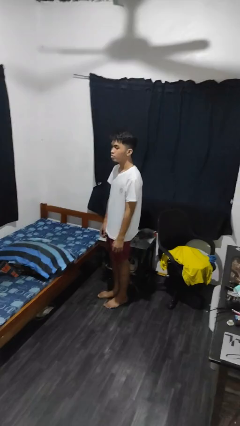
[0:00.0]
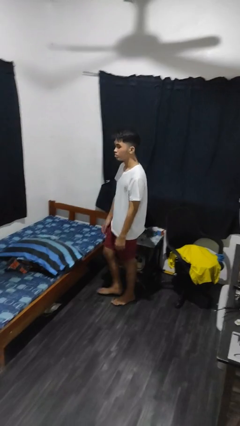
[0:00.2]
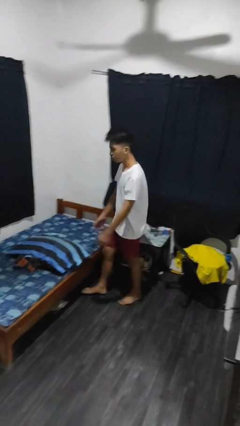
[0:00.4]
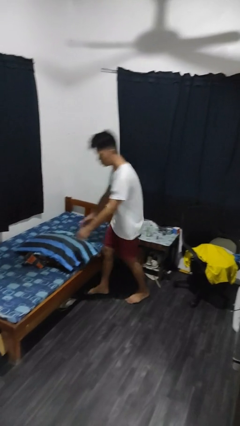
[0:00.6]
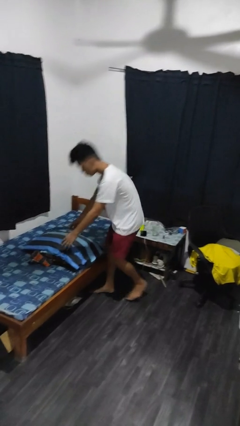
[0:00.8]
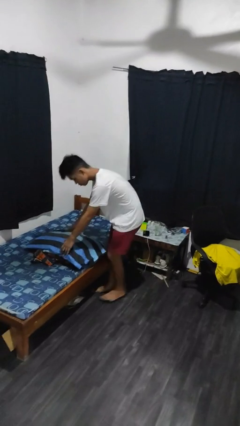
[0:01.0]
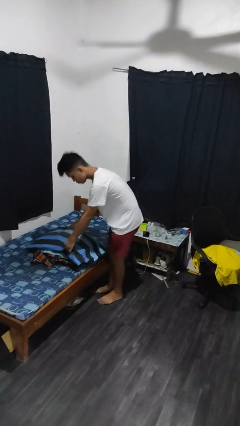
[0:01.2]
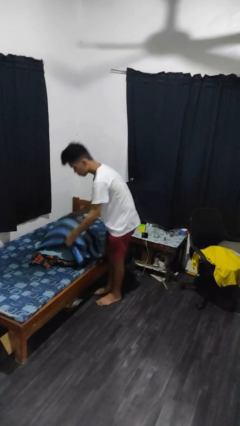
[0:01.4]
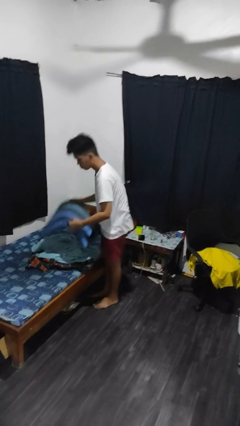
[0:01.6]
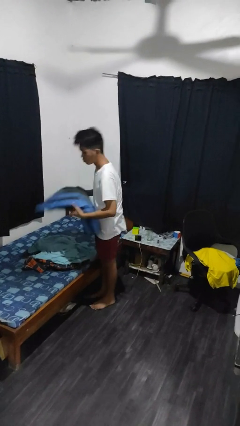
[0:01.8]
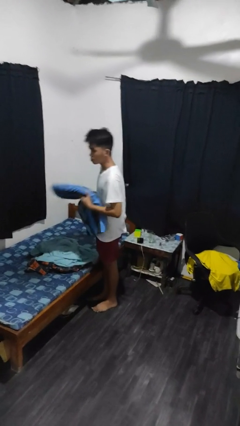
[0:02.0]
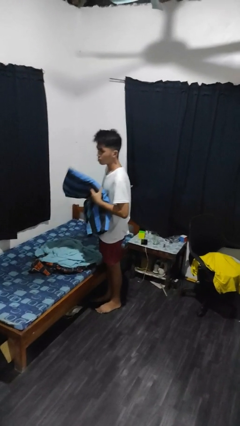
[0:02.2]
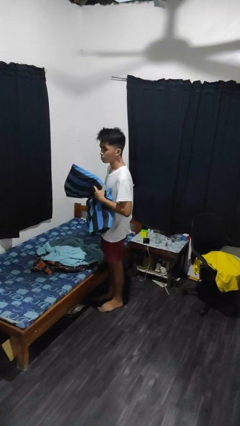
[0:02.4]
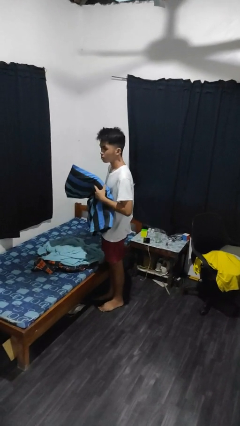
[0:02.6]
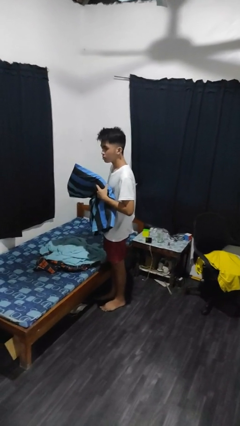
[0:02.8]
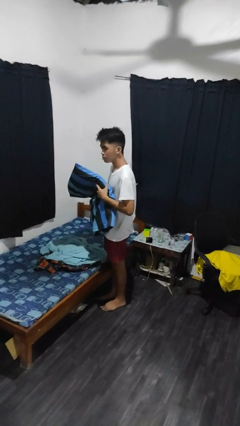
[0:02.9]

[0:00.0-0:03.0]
person picks up object from bed

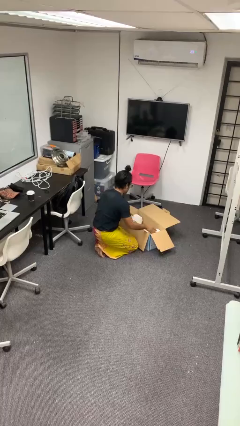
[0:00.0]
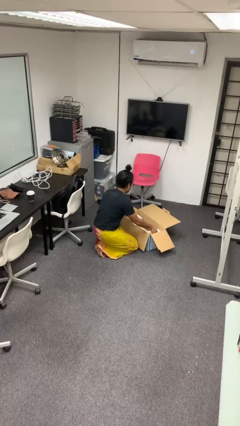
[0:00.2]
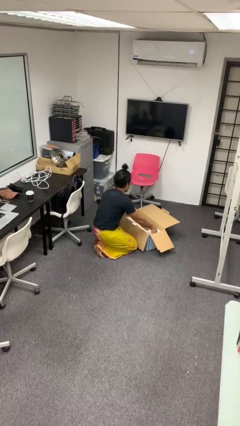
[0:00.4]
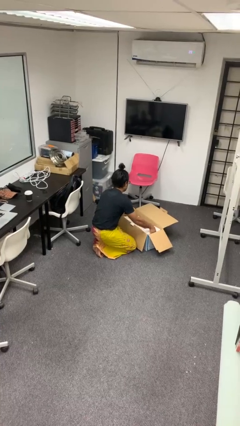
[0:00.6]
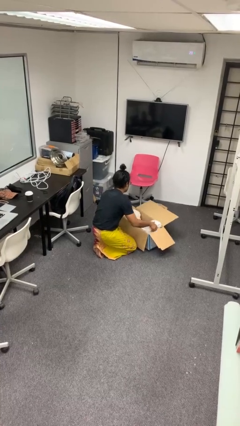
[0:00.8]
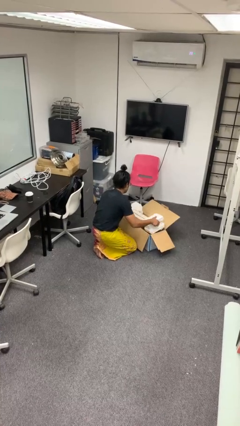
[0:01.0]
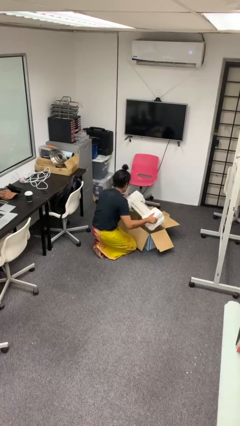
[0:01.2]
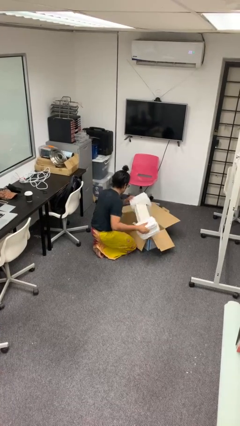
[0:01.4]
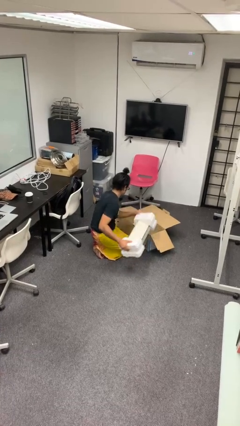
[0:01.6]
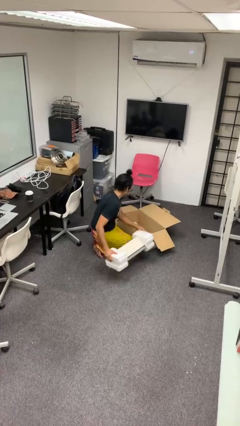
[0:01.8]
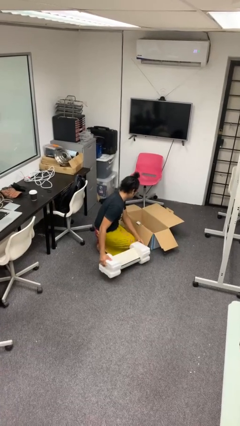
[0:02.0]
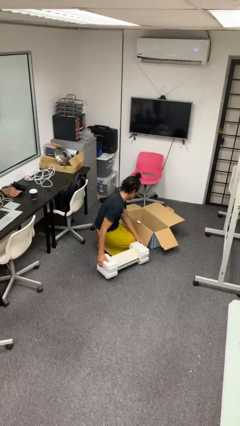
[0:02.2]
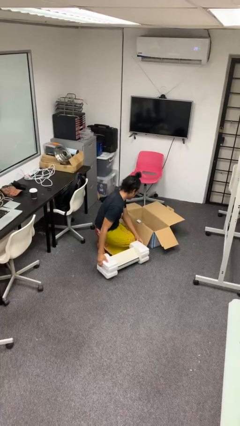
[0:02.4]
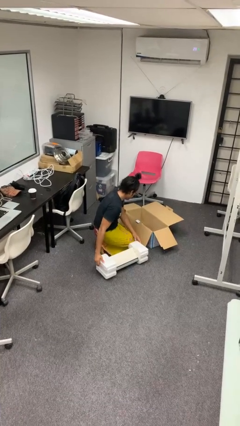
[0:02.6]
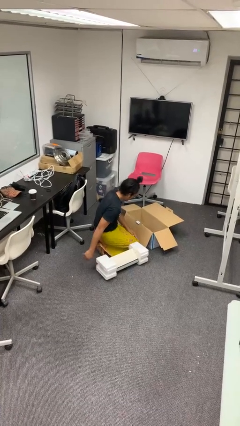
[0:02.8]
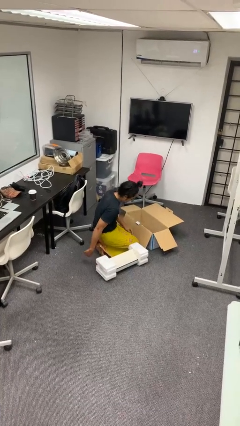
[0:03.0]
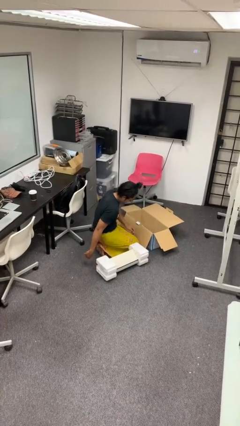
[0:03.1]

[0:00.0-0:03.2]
person takes object from box

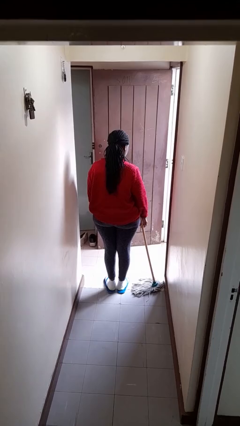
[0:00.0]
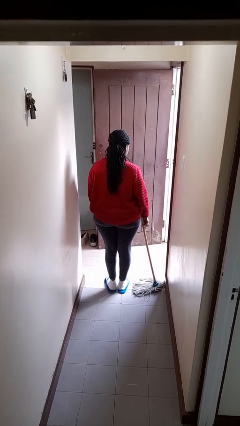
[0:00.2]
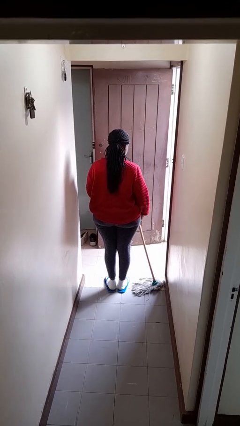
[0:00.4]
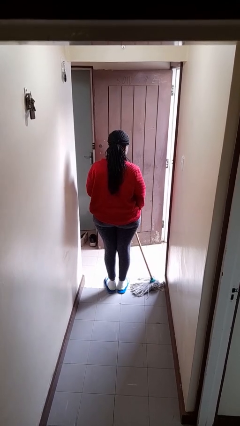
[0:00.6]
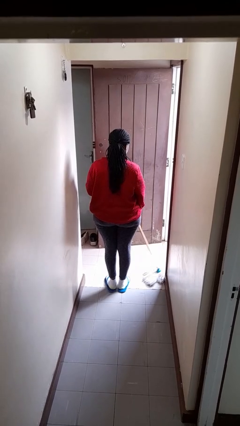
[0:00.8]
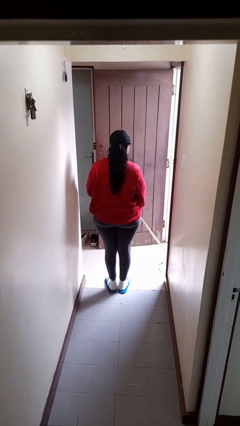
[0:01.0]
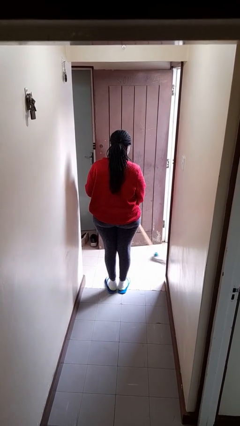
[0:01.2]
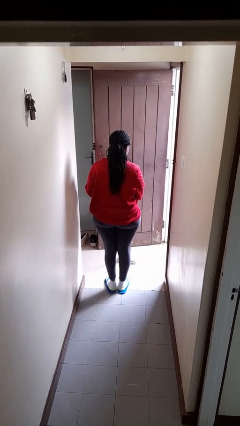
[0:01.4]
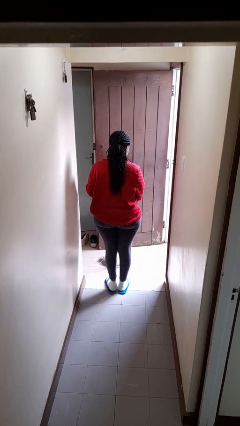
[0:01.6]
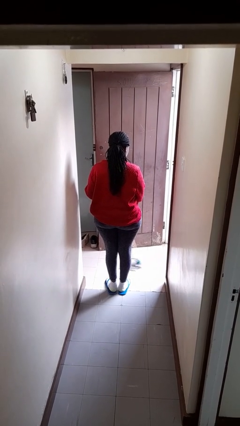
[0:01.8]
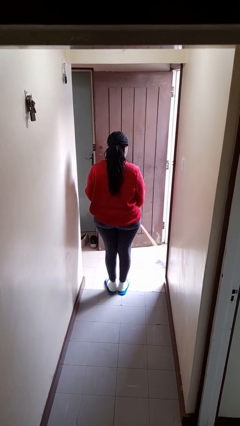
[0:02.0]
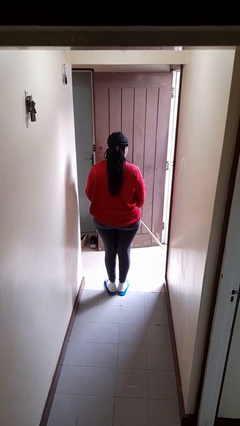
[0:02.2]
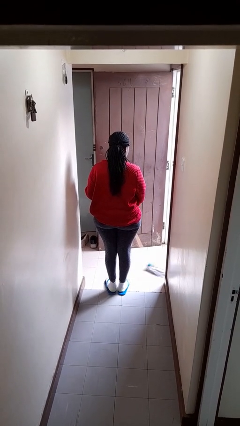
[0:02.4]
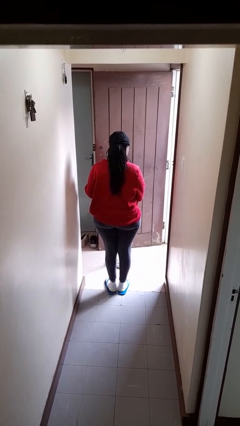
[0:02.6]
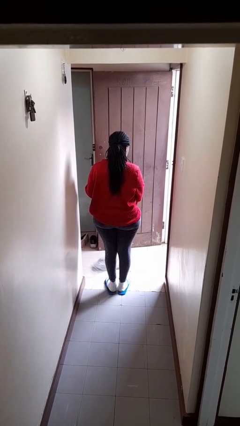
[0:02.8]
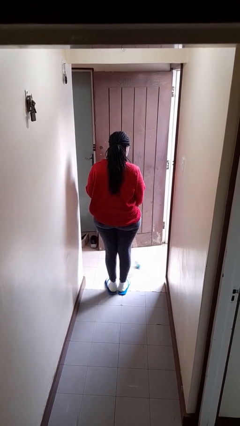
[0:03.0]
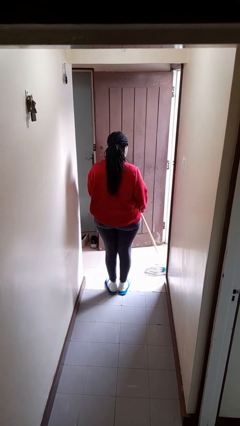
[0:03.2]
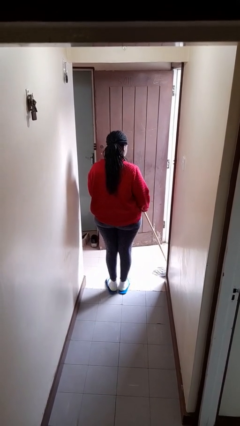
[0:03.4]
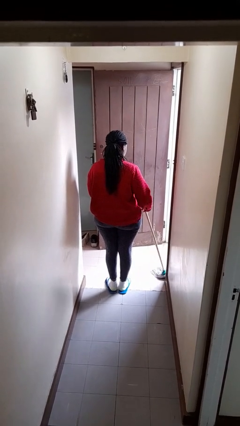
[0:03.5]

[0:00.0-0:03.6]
person mops

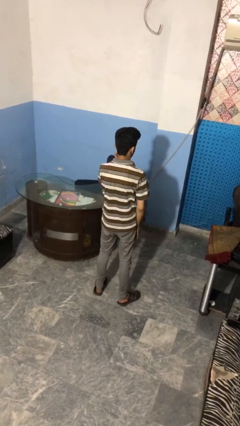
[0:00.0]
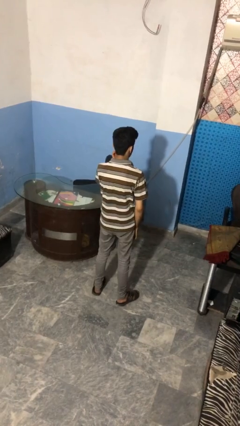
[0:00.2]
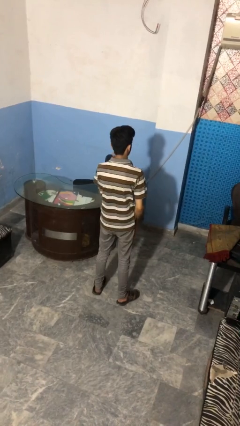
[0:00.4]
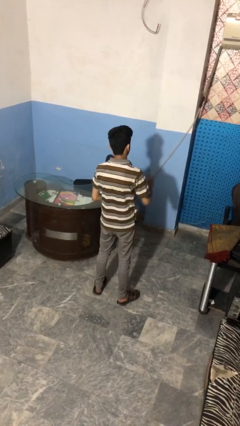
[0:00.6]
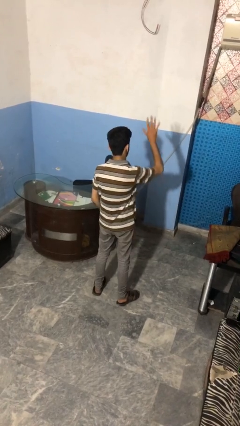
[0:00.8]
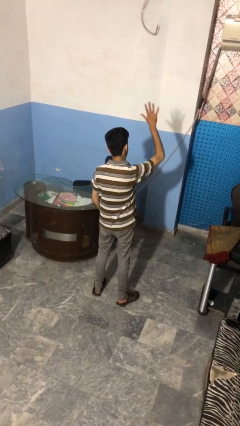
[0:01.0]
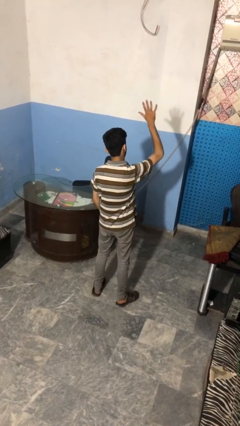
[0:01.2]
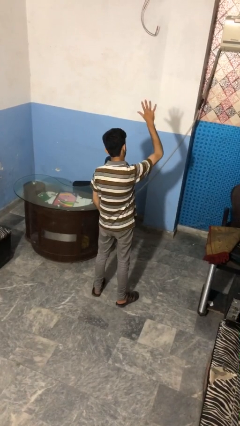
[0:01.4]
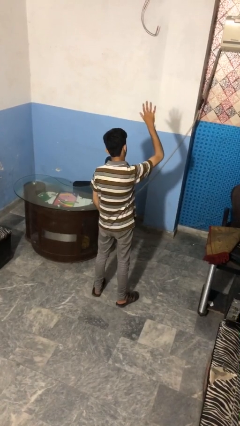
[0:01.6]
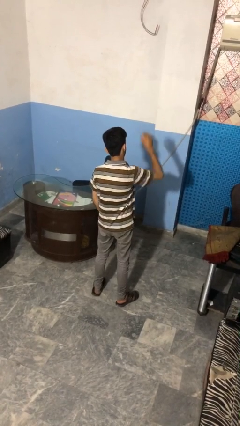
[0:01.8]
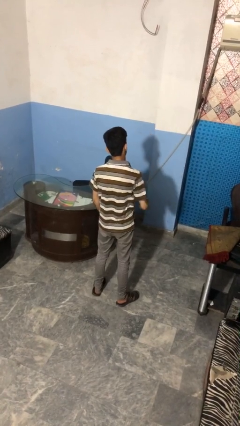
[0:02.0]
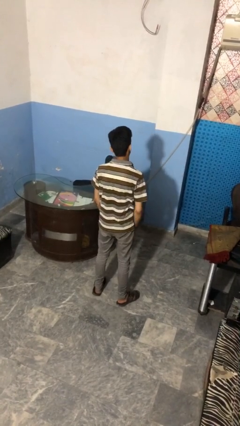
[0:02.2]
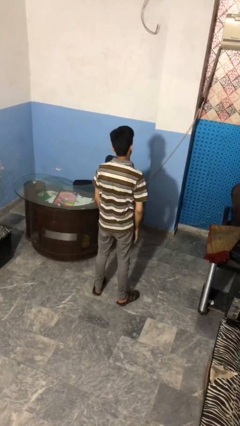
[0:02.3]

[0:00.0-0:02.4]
person gestures number five

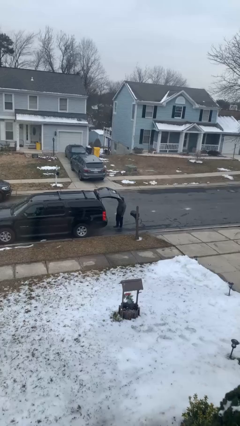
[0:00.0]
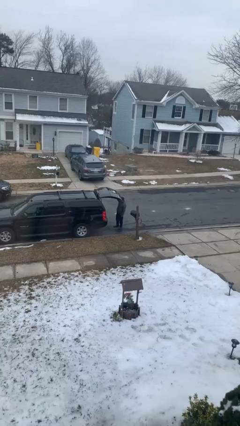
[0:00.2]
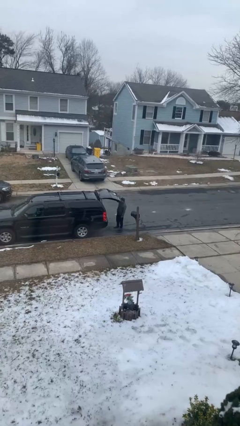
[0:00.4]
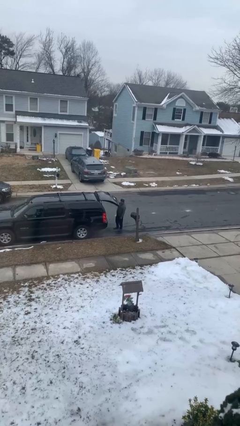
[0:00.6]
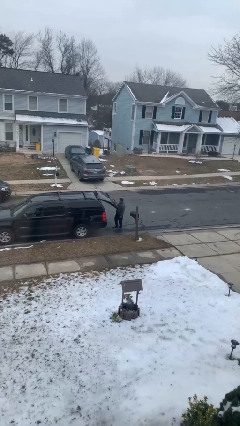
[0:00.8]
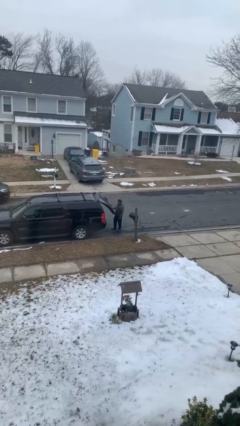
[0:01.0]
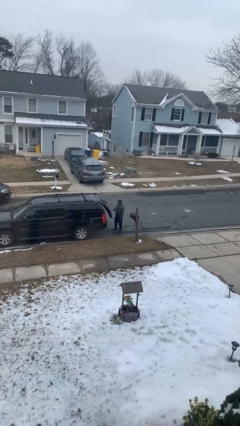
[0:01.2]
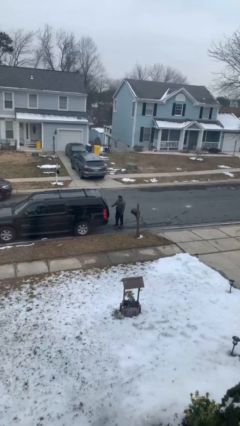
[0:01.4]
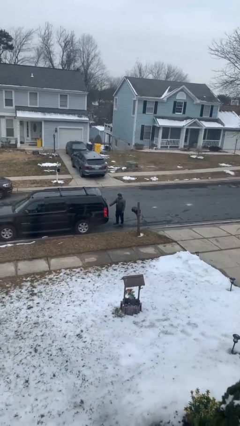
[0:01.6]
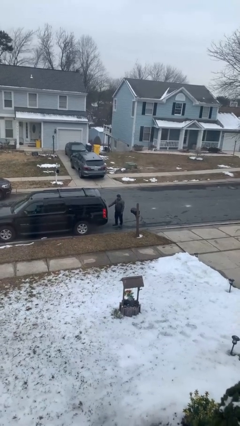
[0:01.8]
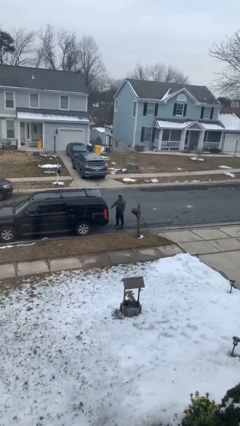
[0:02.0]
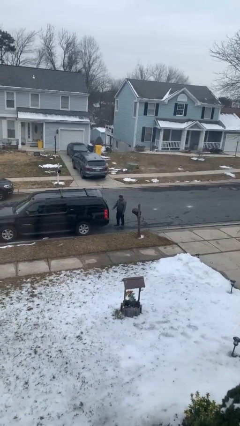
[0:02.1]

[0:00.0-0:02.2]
person closes car trunk

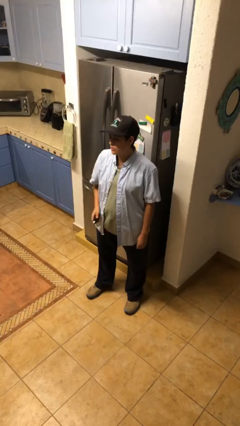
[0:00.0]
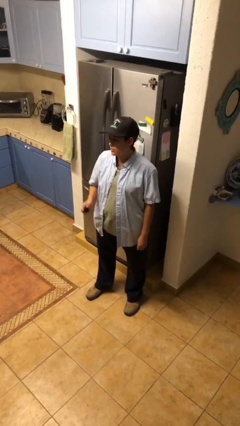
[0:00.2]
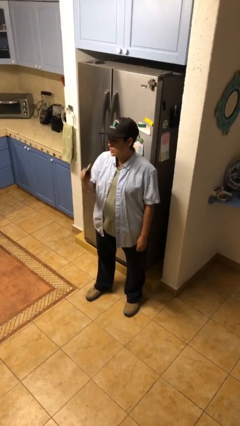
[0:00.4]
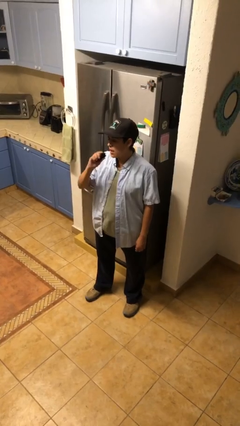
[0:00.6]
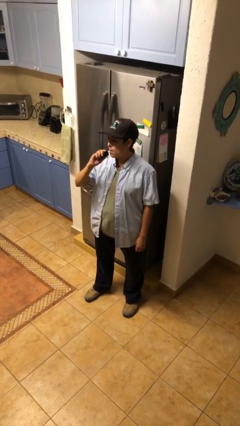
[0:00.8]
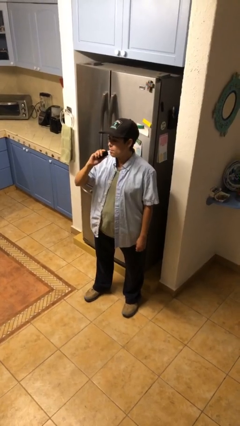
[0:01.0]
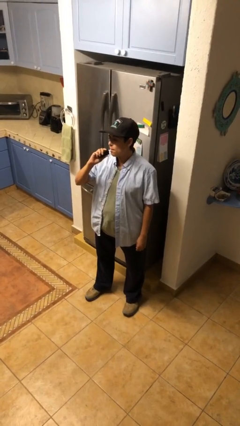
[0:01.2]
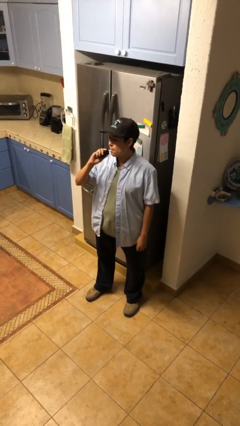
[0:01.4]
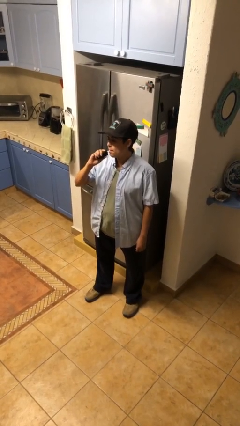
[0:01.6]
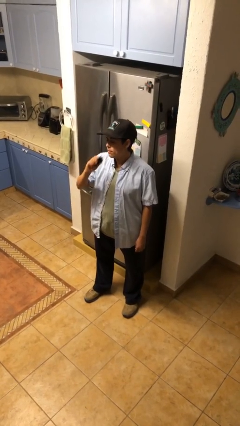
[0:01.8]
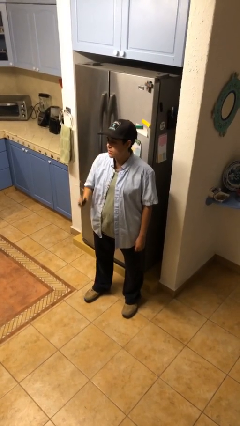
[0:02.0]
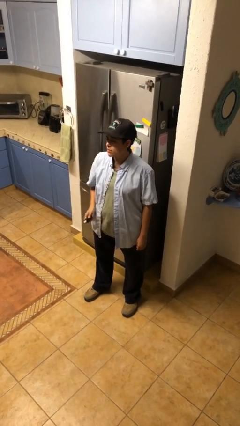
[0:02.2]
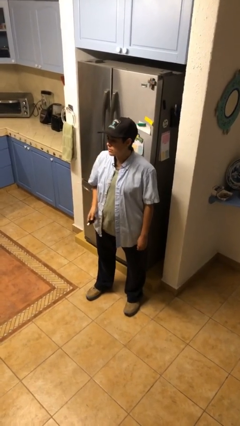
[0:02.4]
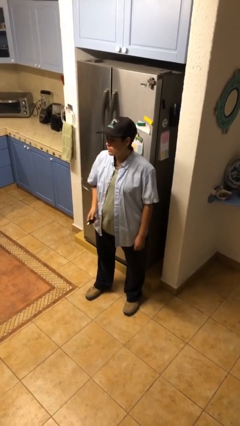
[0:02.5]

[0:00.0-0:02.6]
person vapes

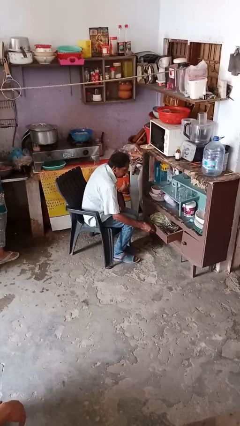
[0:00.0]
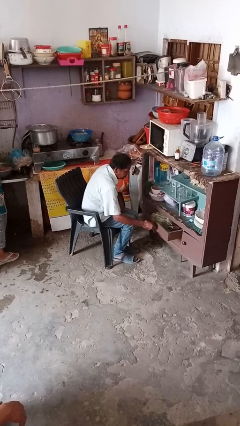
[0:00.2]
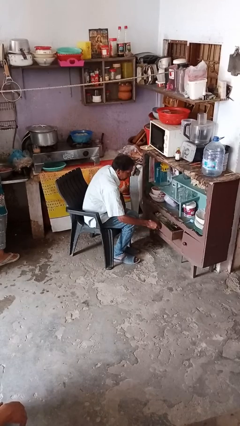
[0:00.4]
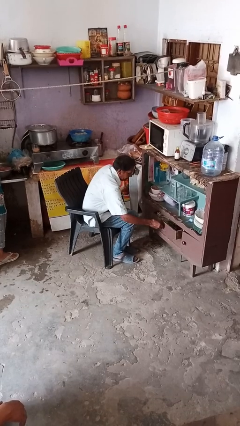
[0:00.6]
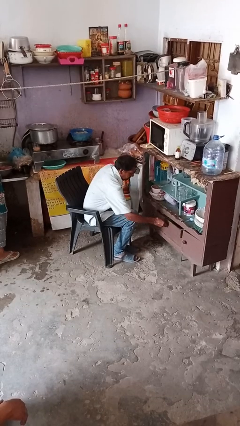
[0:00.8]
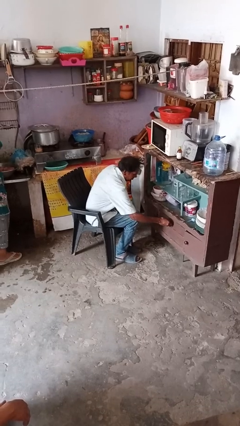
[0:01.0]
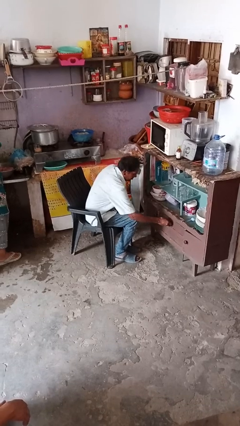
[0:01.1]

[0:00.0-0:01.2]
person closes dresser drawer
